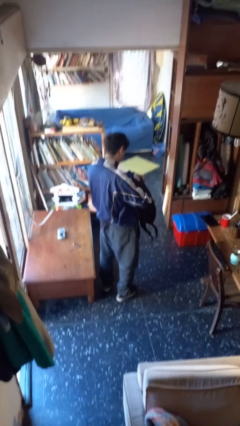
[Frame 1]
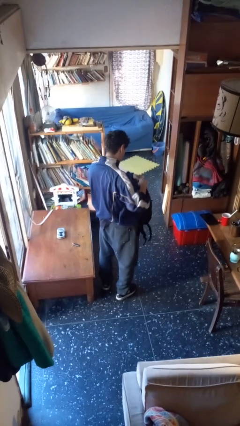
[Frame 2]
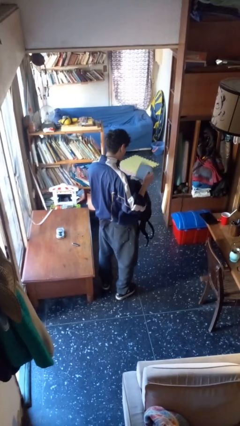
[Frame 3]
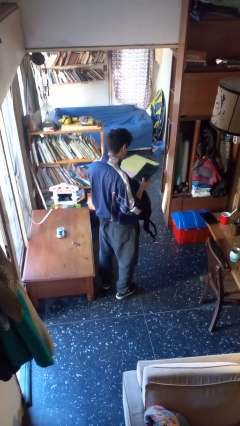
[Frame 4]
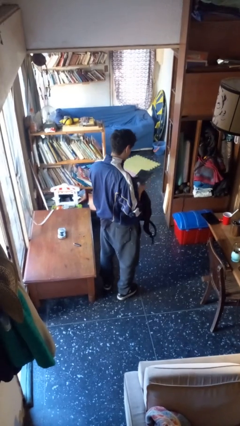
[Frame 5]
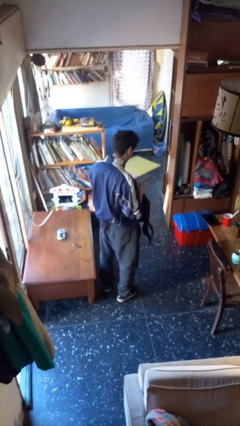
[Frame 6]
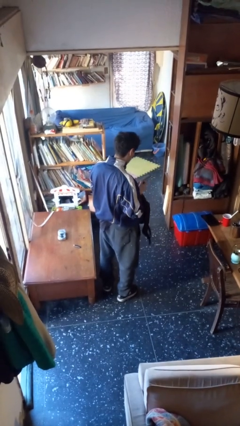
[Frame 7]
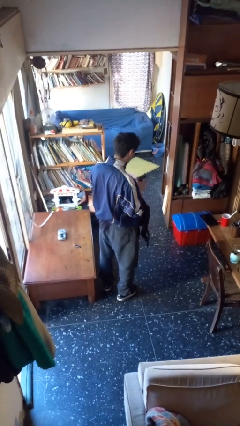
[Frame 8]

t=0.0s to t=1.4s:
person takes object from backpack

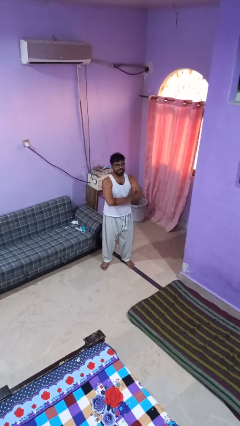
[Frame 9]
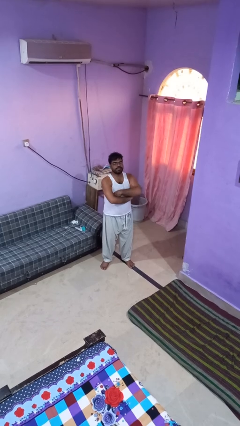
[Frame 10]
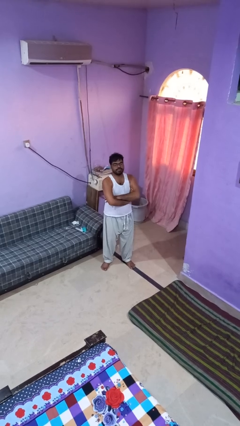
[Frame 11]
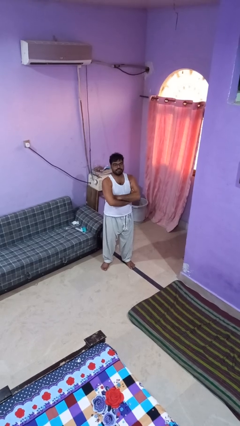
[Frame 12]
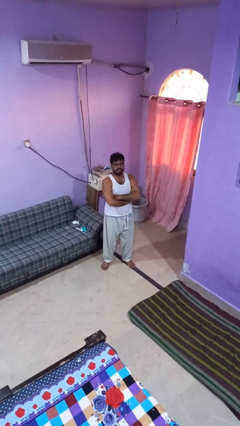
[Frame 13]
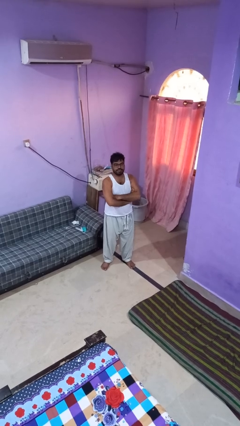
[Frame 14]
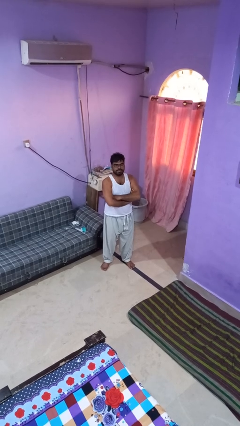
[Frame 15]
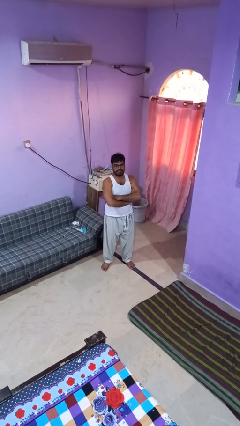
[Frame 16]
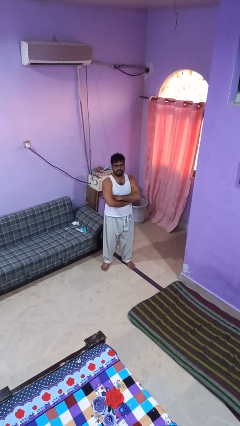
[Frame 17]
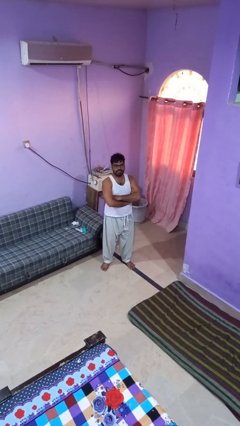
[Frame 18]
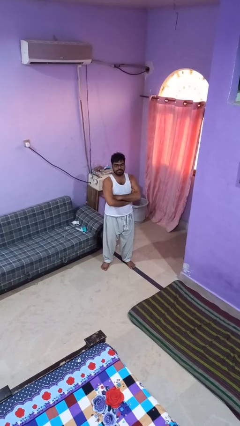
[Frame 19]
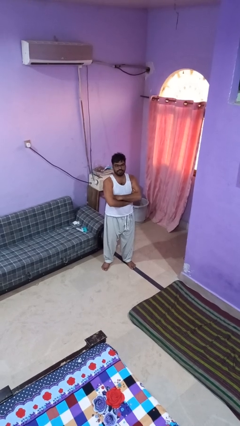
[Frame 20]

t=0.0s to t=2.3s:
person crosses arms

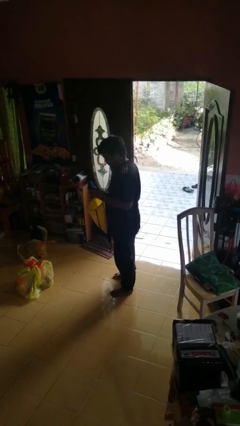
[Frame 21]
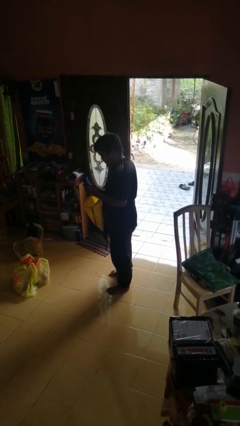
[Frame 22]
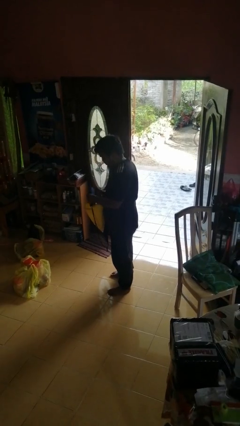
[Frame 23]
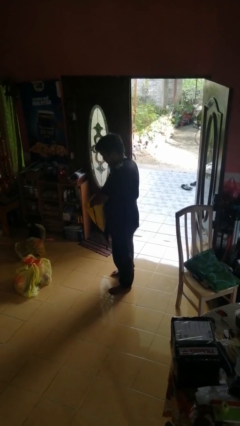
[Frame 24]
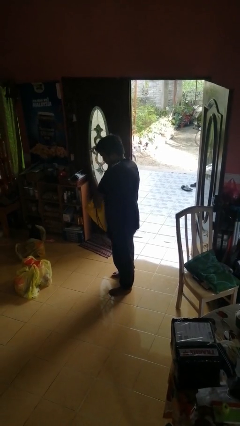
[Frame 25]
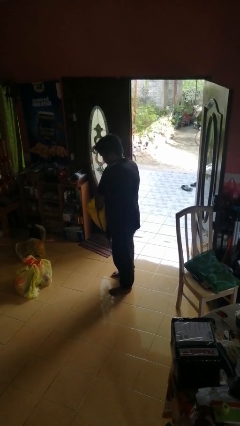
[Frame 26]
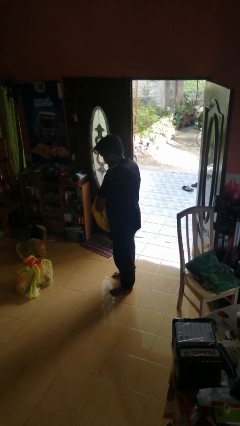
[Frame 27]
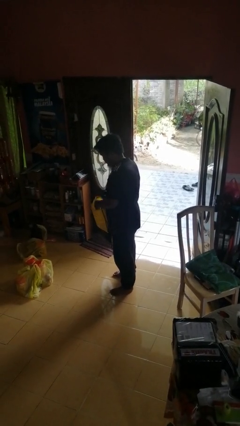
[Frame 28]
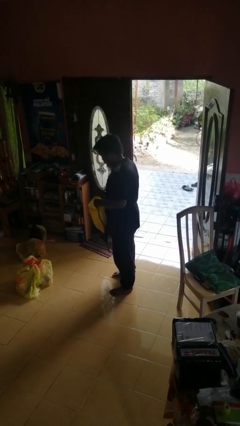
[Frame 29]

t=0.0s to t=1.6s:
person puts object into bag

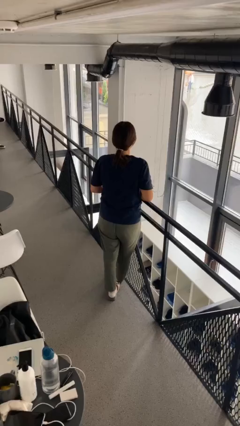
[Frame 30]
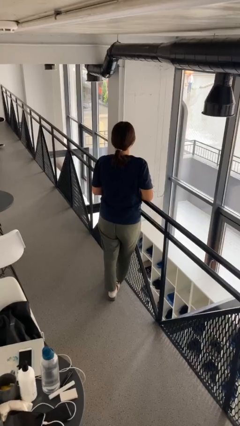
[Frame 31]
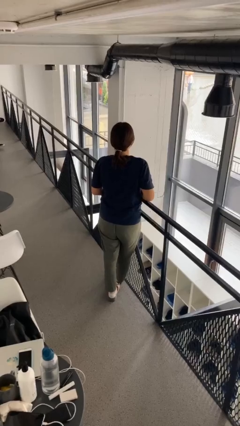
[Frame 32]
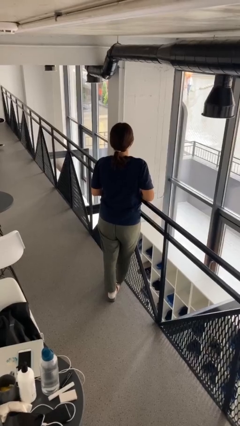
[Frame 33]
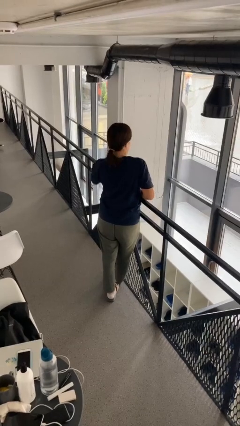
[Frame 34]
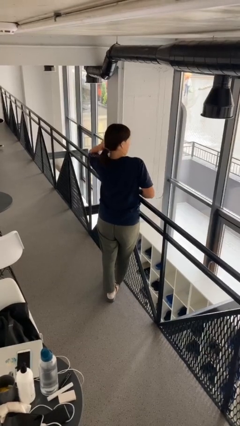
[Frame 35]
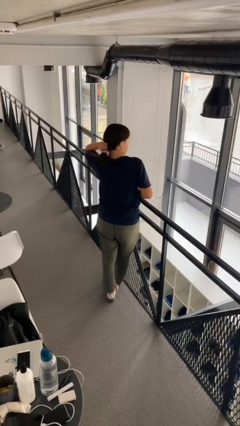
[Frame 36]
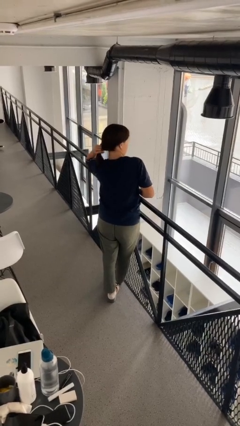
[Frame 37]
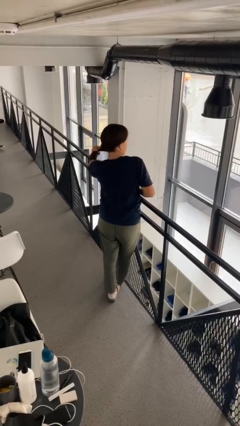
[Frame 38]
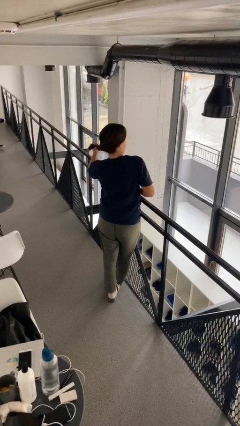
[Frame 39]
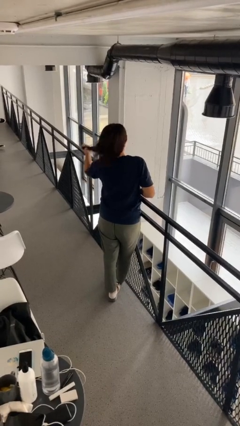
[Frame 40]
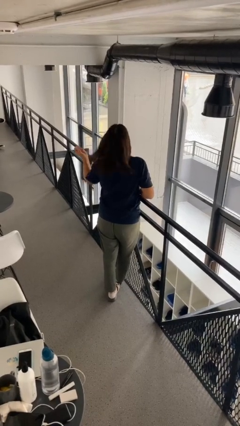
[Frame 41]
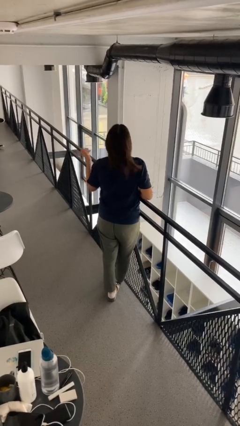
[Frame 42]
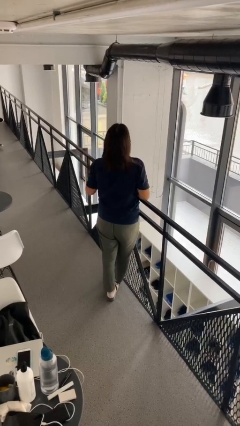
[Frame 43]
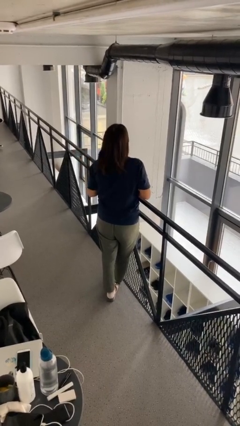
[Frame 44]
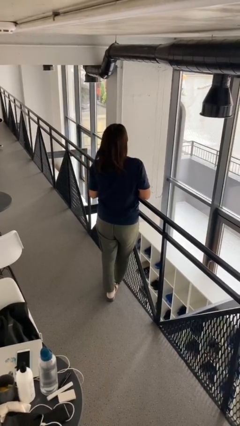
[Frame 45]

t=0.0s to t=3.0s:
person takes off hairtie

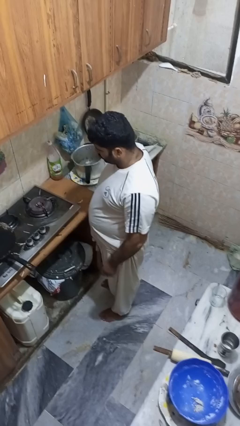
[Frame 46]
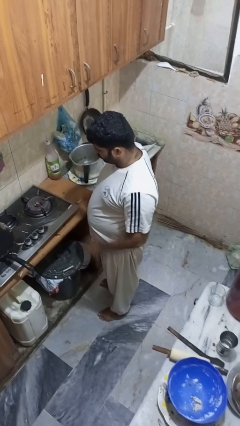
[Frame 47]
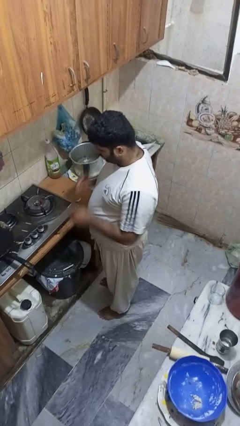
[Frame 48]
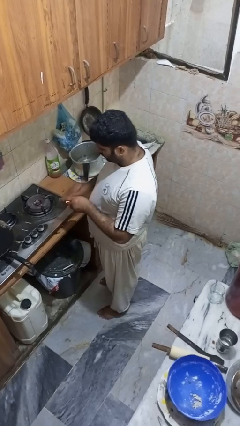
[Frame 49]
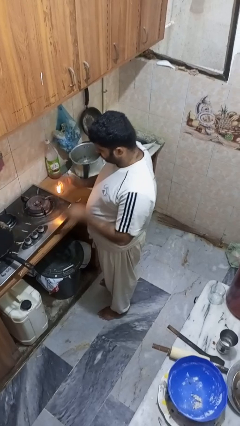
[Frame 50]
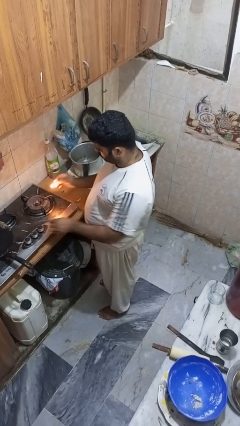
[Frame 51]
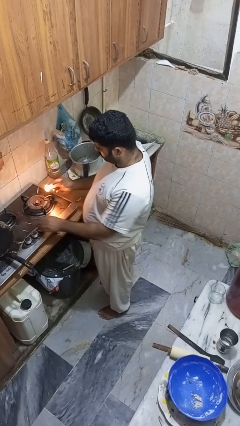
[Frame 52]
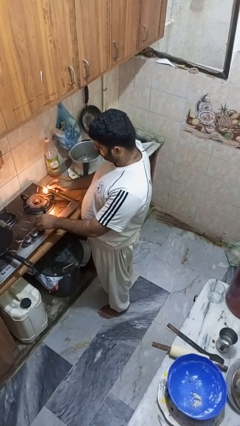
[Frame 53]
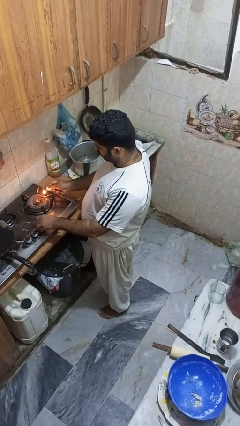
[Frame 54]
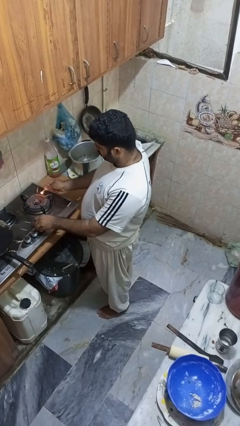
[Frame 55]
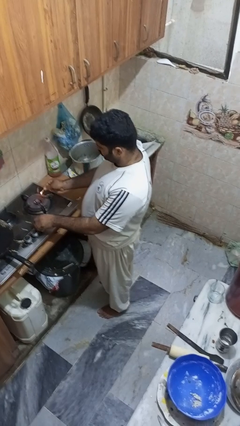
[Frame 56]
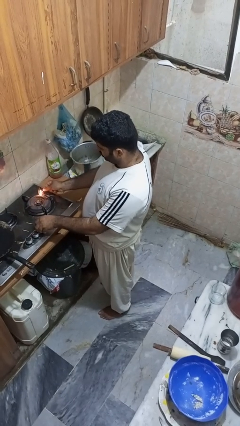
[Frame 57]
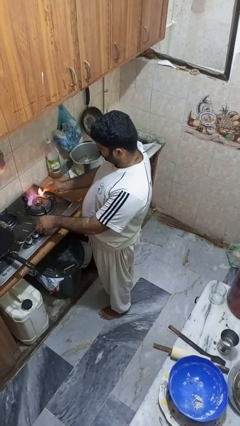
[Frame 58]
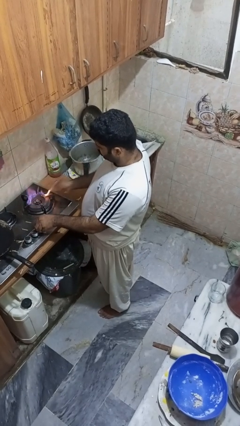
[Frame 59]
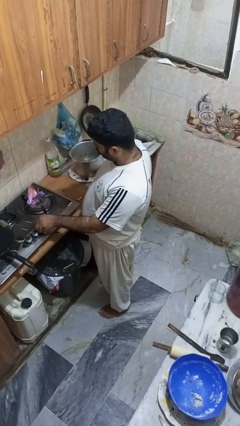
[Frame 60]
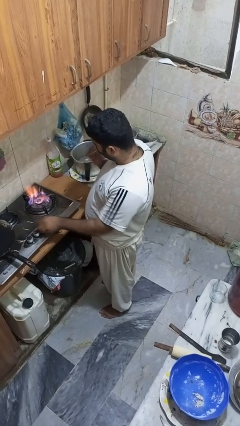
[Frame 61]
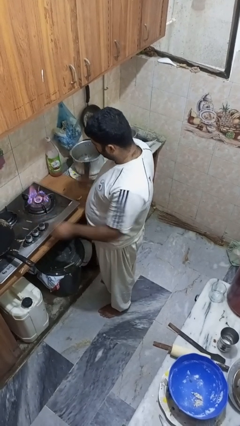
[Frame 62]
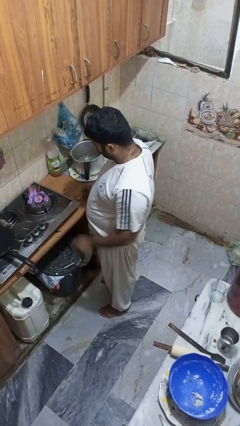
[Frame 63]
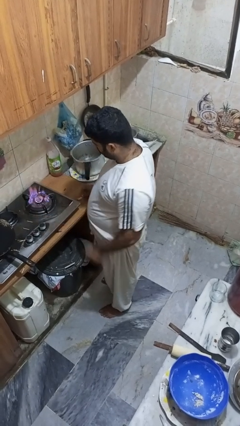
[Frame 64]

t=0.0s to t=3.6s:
person turns on stovetop

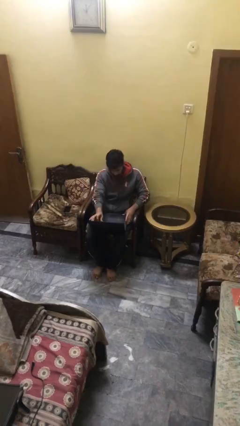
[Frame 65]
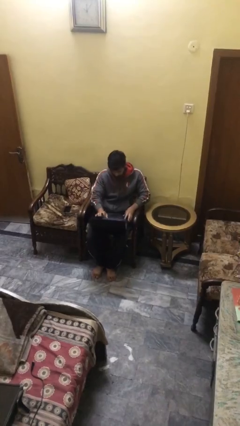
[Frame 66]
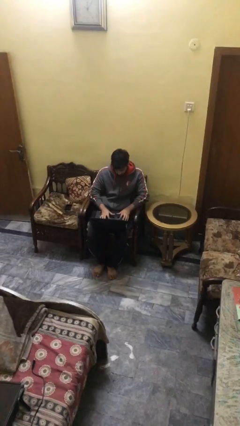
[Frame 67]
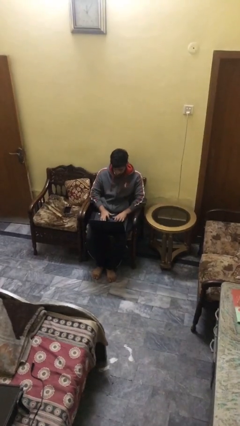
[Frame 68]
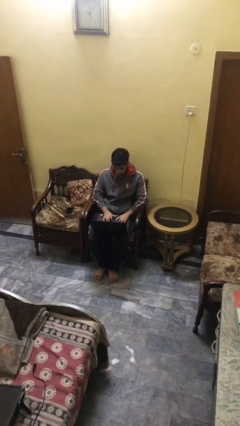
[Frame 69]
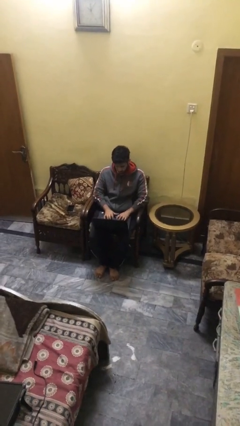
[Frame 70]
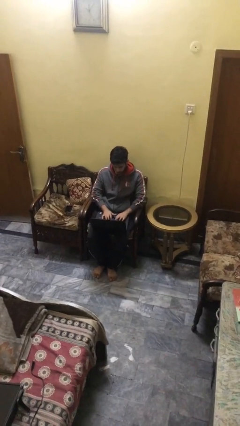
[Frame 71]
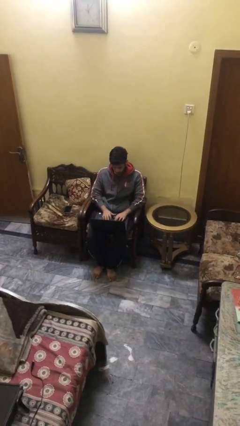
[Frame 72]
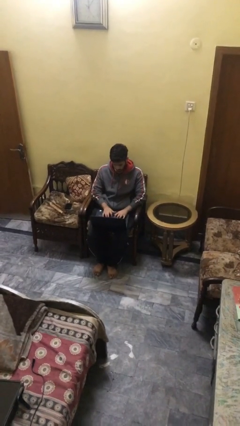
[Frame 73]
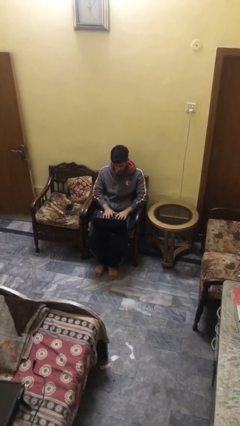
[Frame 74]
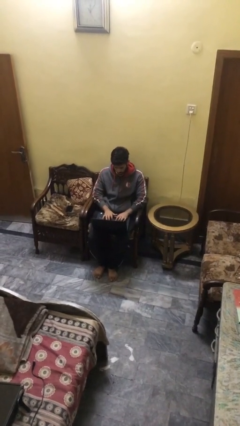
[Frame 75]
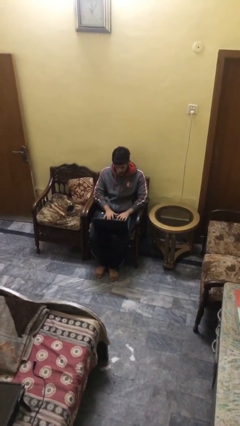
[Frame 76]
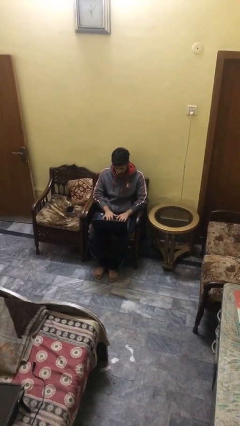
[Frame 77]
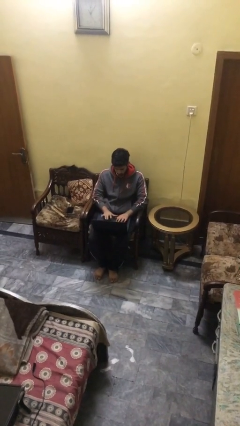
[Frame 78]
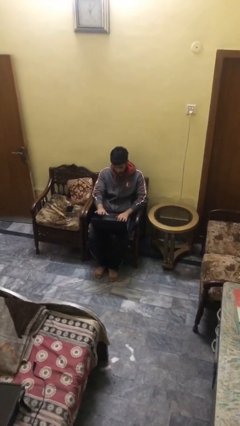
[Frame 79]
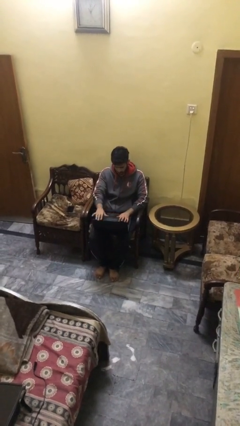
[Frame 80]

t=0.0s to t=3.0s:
person interacts with laptop

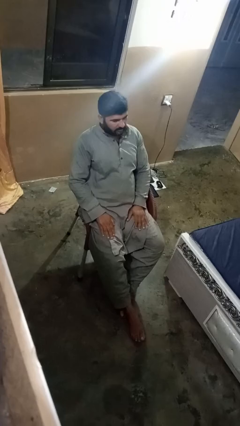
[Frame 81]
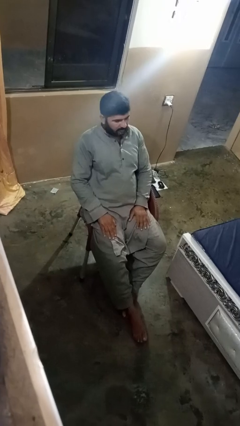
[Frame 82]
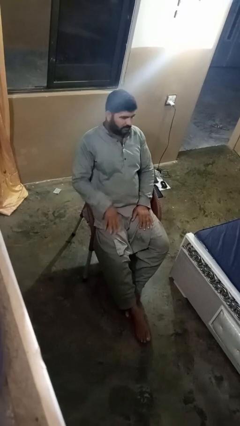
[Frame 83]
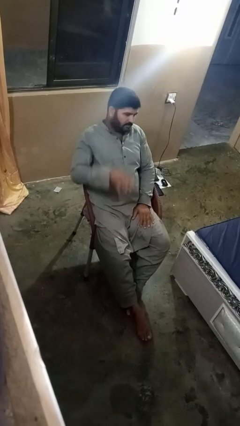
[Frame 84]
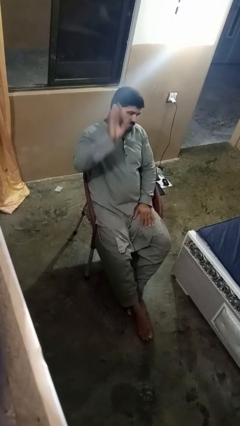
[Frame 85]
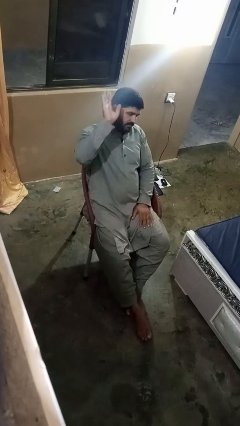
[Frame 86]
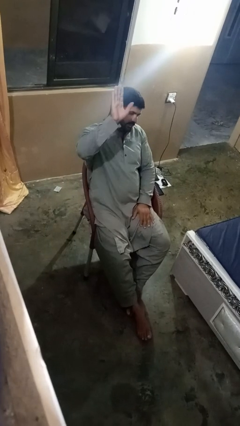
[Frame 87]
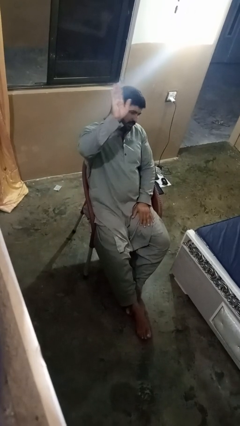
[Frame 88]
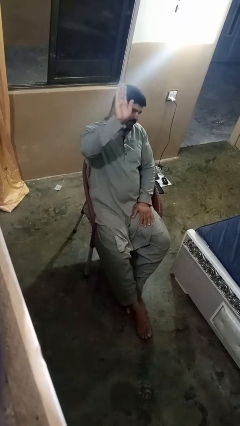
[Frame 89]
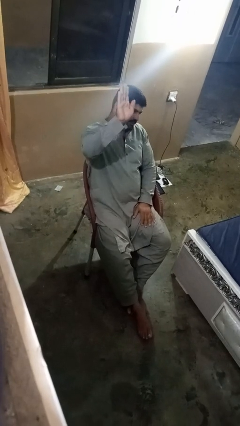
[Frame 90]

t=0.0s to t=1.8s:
person gestures number five

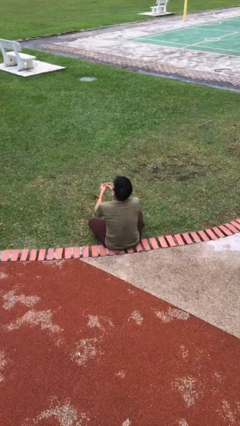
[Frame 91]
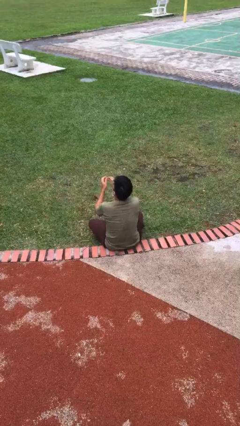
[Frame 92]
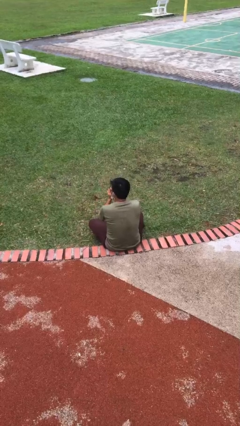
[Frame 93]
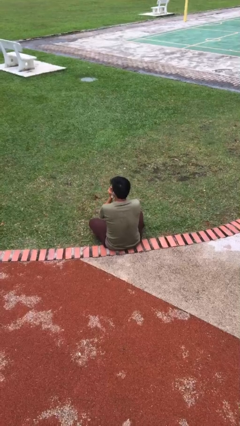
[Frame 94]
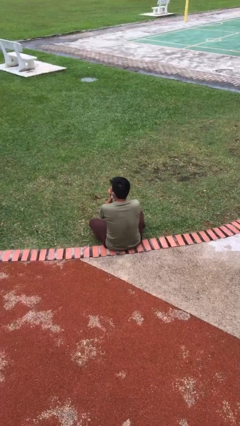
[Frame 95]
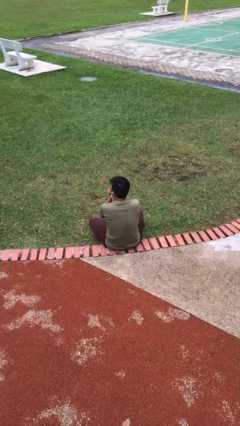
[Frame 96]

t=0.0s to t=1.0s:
person sneezes into hand
